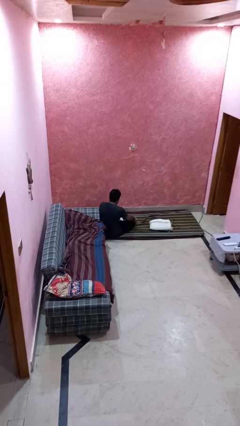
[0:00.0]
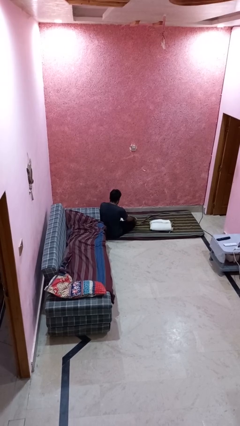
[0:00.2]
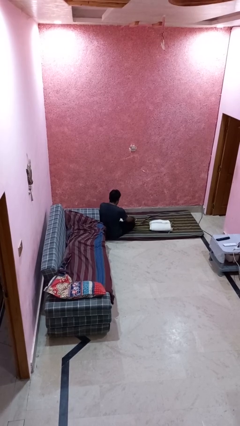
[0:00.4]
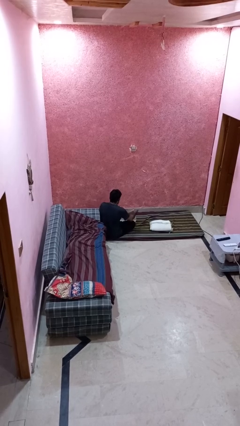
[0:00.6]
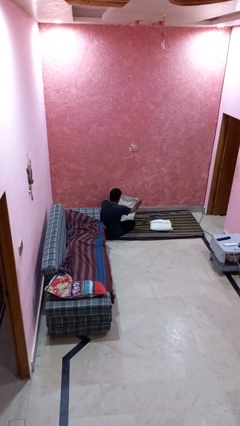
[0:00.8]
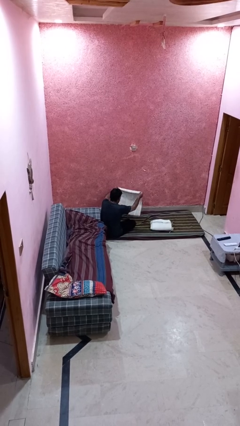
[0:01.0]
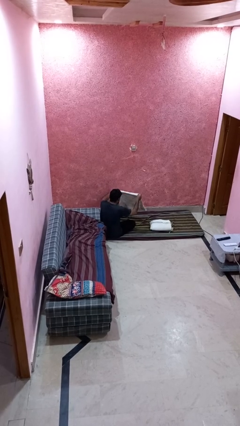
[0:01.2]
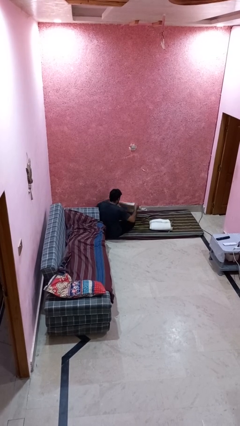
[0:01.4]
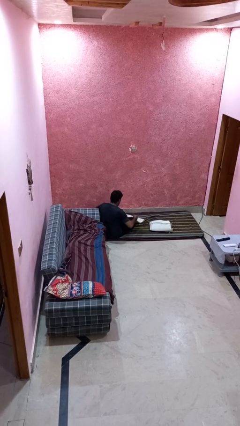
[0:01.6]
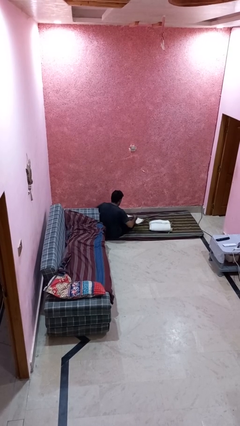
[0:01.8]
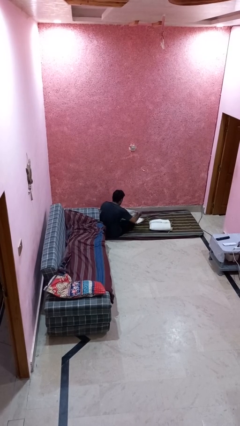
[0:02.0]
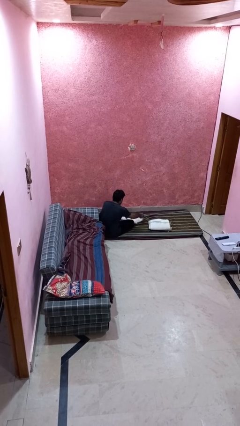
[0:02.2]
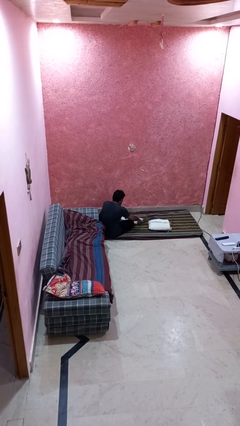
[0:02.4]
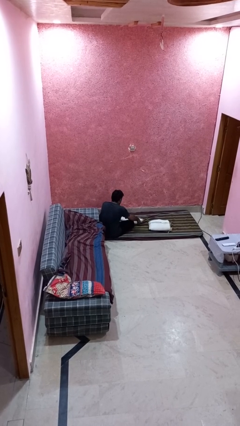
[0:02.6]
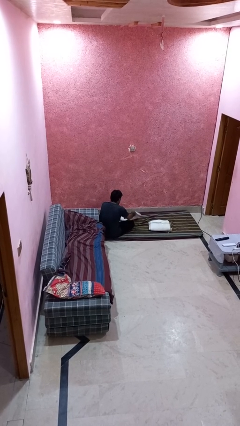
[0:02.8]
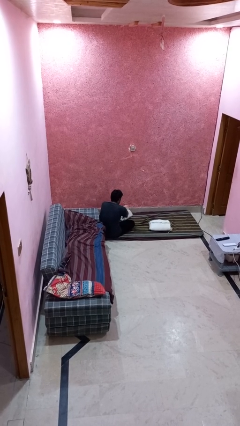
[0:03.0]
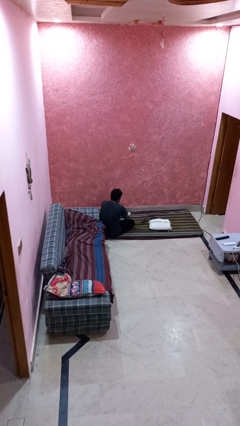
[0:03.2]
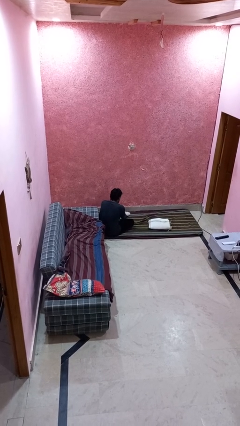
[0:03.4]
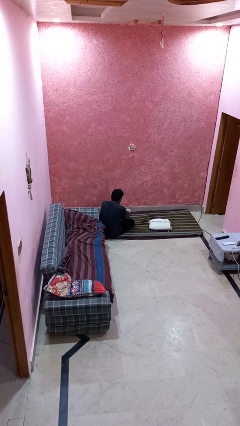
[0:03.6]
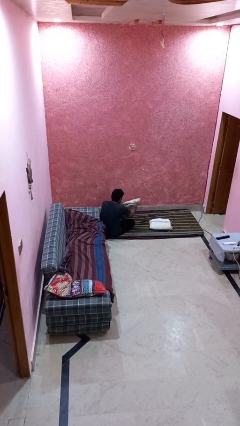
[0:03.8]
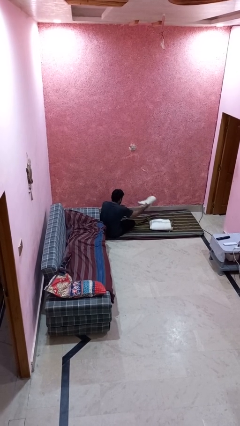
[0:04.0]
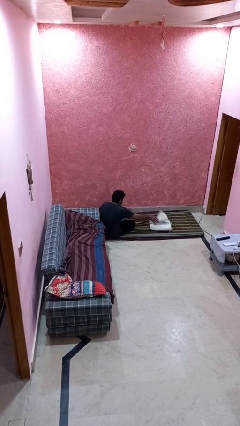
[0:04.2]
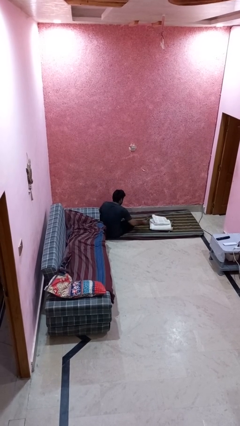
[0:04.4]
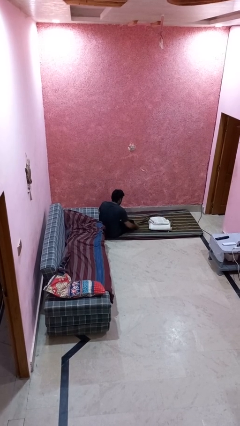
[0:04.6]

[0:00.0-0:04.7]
person folds towel

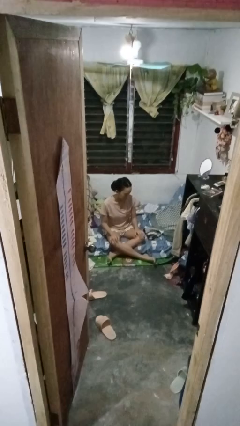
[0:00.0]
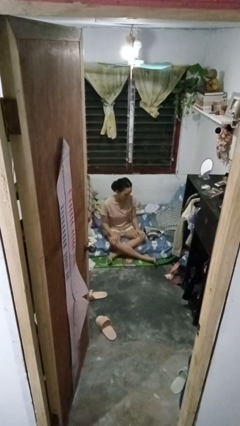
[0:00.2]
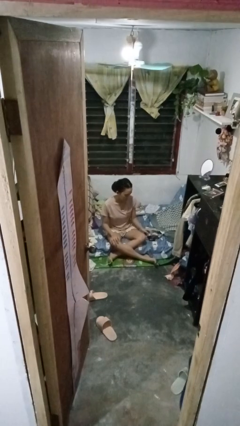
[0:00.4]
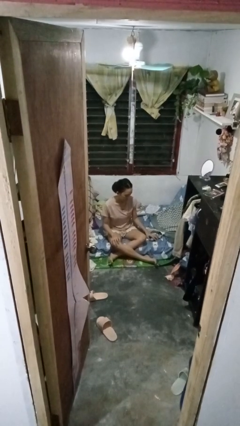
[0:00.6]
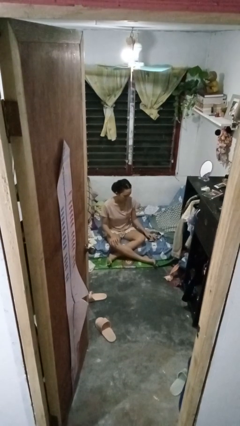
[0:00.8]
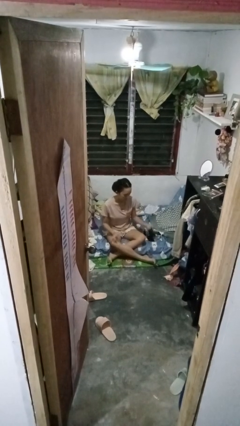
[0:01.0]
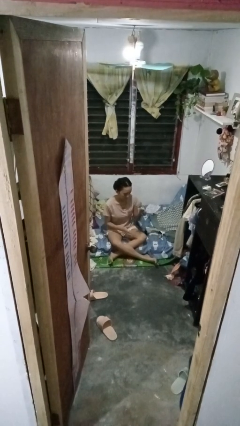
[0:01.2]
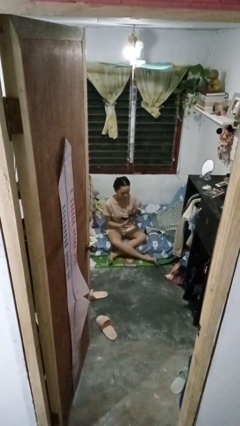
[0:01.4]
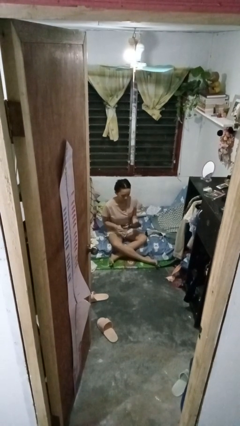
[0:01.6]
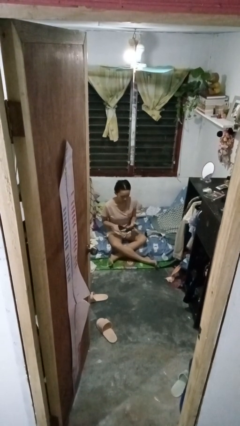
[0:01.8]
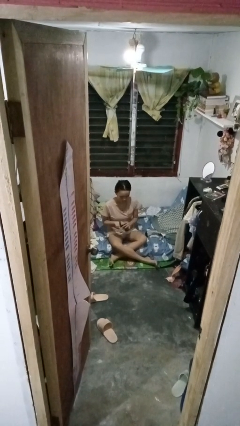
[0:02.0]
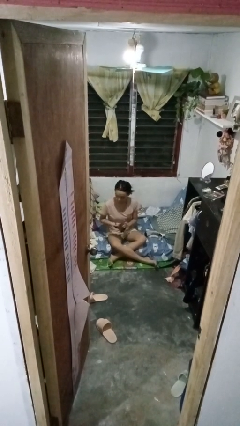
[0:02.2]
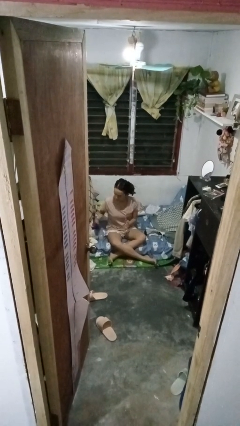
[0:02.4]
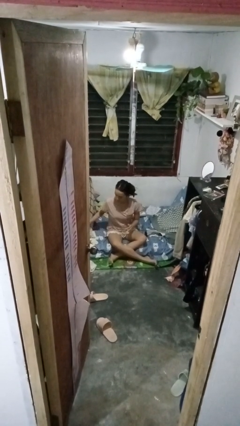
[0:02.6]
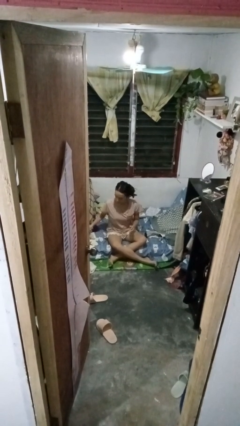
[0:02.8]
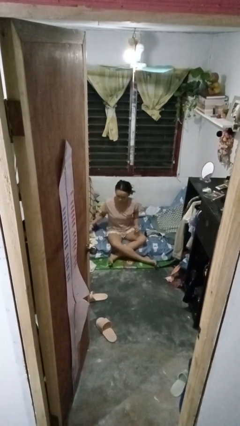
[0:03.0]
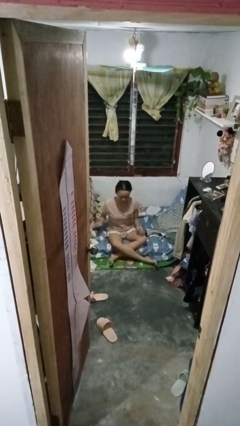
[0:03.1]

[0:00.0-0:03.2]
person folds socks

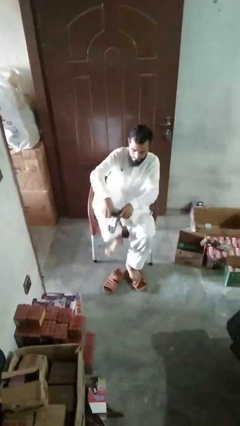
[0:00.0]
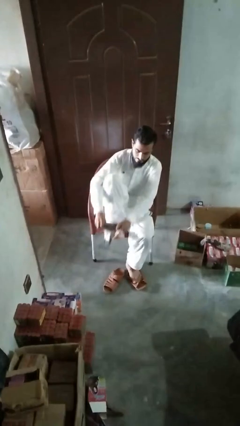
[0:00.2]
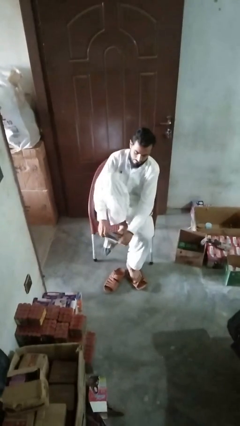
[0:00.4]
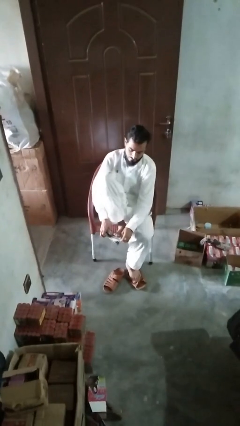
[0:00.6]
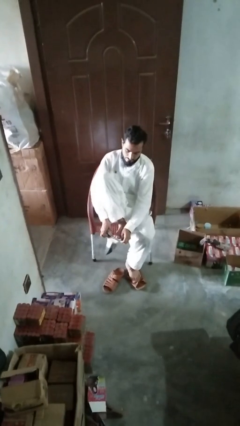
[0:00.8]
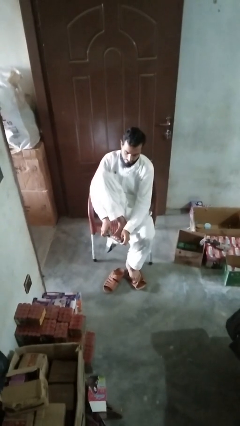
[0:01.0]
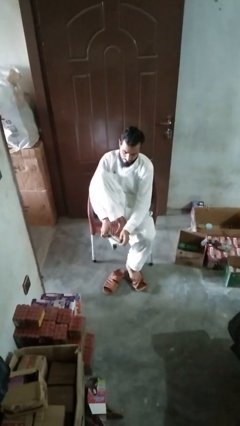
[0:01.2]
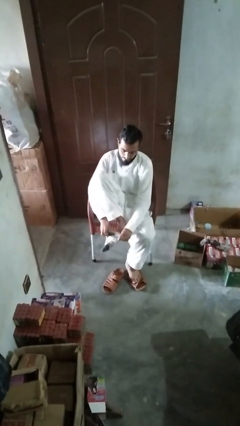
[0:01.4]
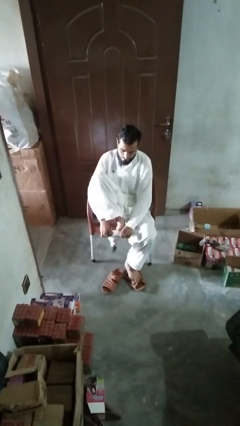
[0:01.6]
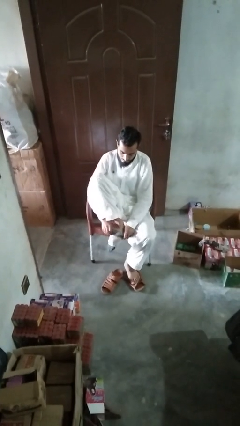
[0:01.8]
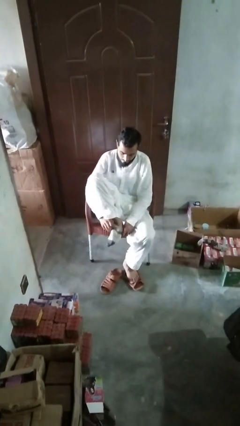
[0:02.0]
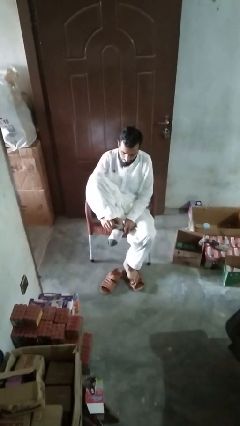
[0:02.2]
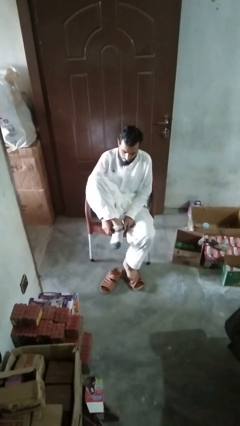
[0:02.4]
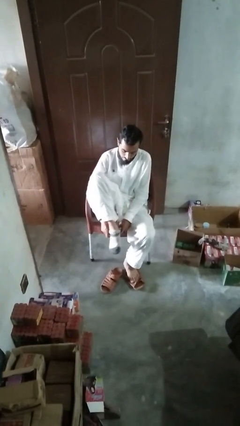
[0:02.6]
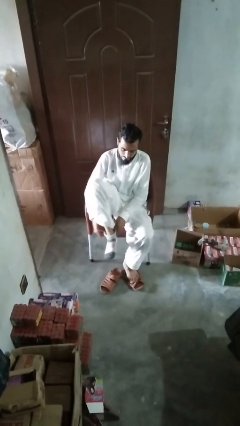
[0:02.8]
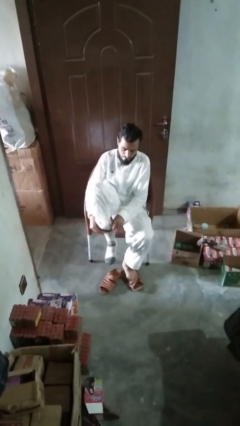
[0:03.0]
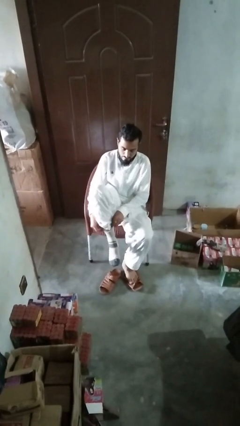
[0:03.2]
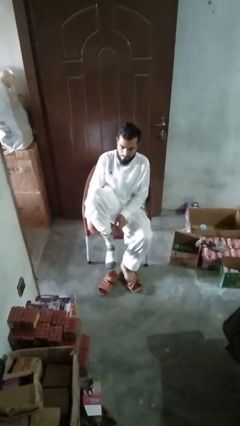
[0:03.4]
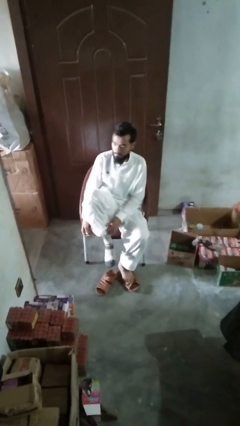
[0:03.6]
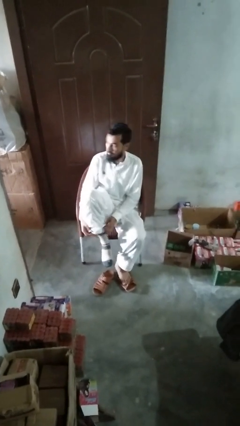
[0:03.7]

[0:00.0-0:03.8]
person puts on socks

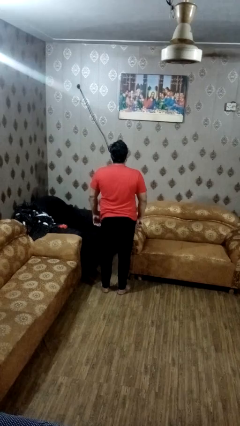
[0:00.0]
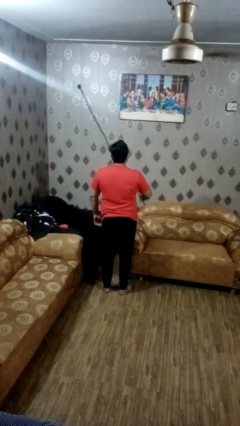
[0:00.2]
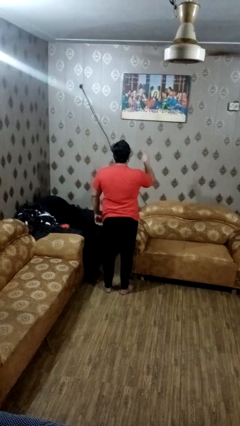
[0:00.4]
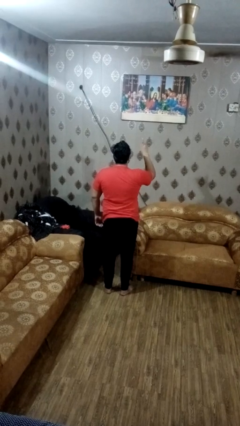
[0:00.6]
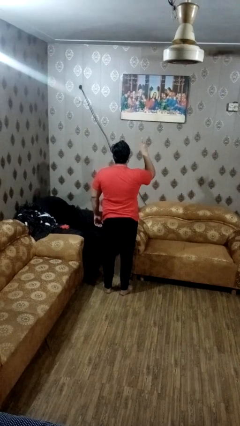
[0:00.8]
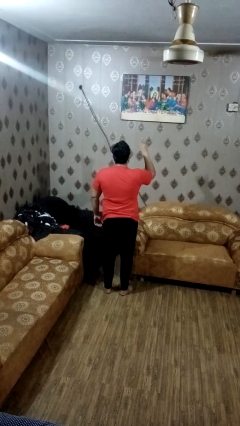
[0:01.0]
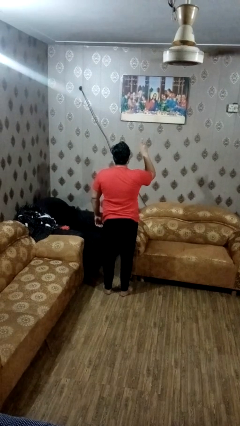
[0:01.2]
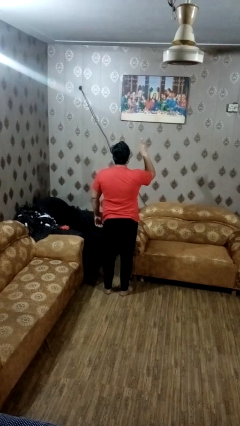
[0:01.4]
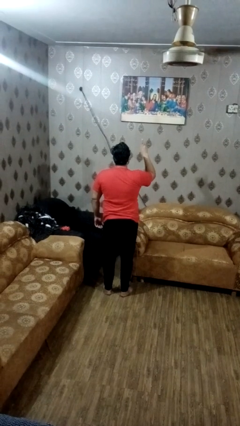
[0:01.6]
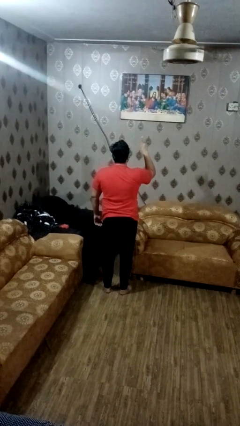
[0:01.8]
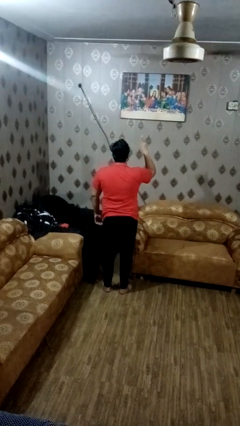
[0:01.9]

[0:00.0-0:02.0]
person gestures number one

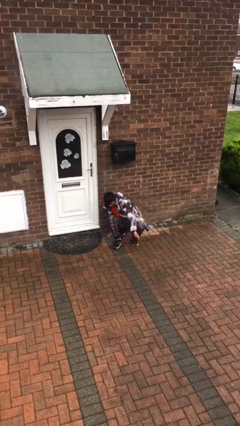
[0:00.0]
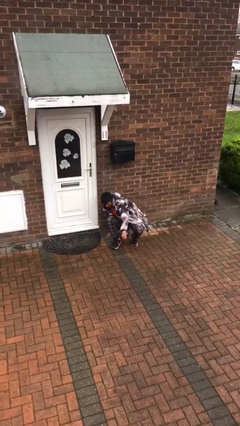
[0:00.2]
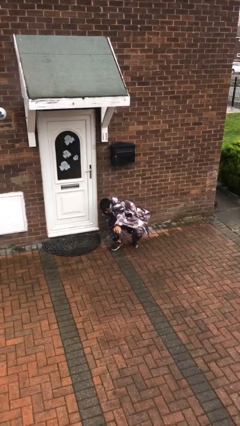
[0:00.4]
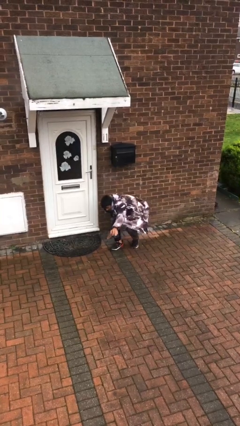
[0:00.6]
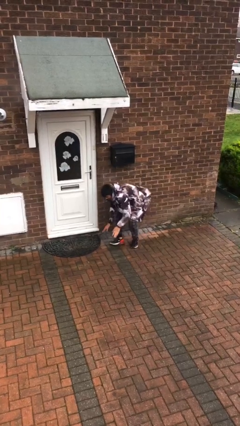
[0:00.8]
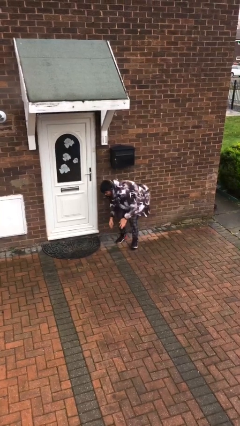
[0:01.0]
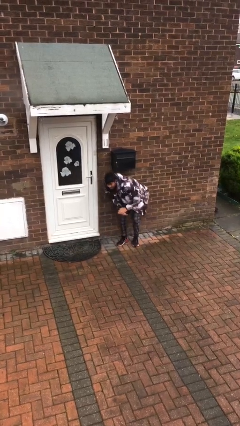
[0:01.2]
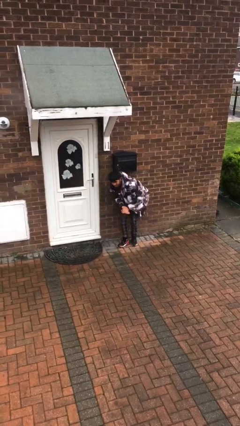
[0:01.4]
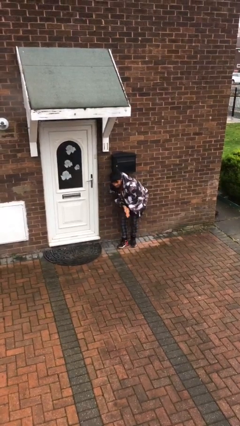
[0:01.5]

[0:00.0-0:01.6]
person stands up

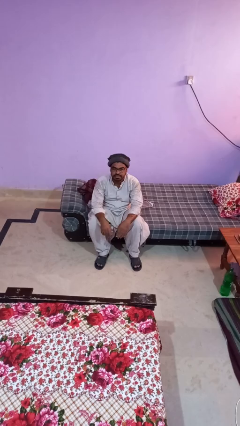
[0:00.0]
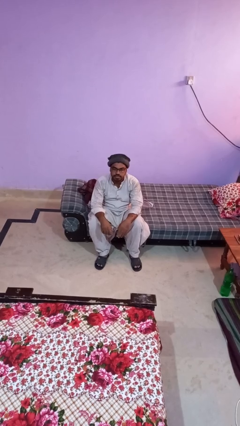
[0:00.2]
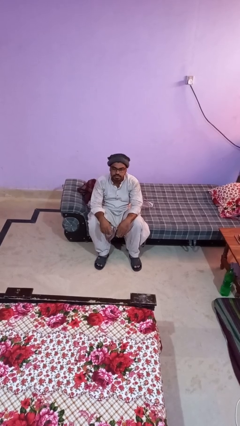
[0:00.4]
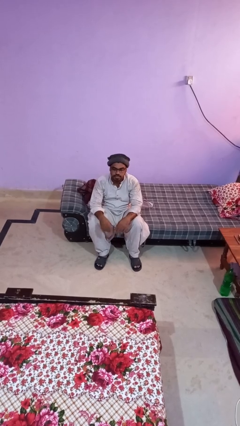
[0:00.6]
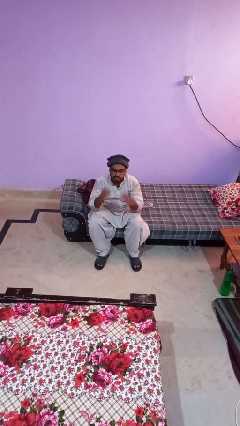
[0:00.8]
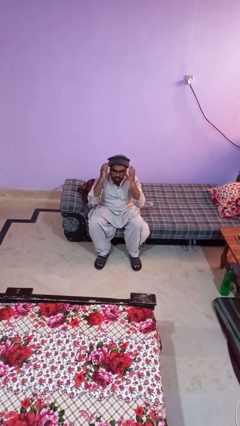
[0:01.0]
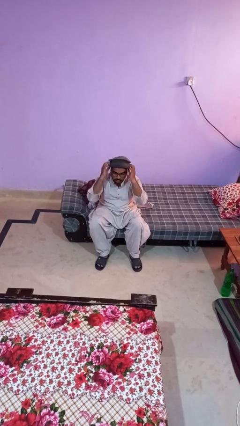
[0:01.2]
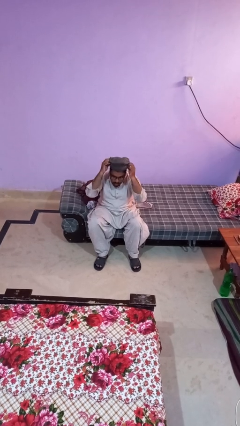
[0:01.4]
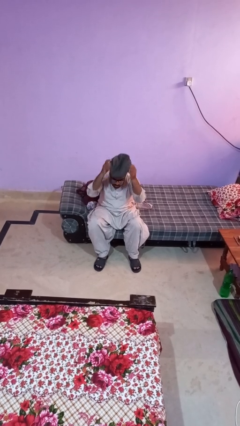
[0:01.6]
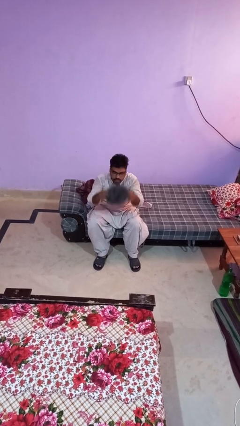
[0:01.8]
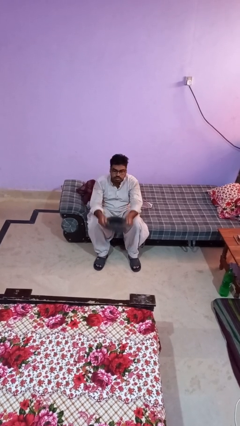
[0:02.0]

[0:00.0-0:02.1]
person takes off hat
